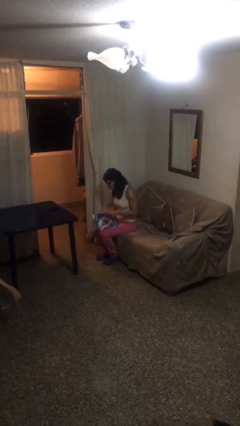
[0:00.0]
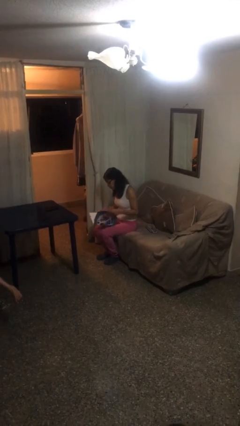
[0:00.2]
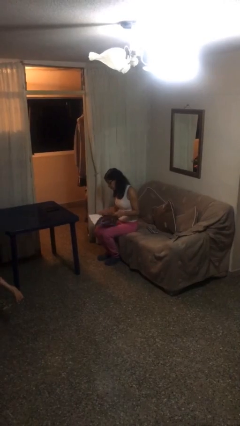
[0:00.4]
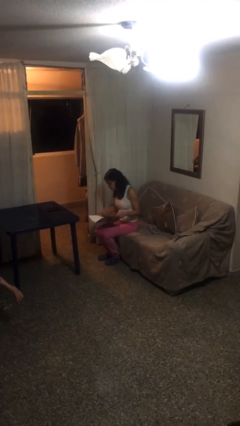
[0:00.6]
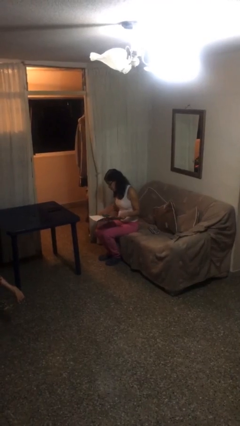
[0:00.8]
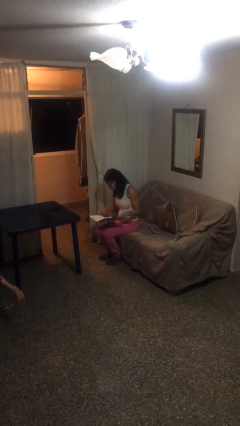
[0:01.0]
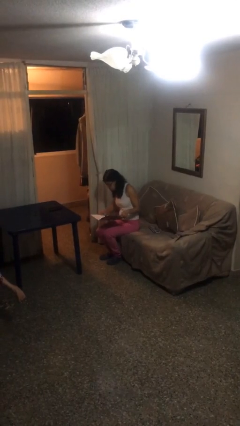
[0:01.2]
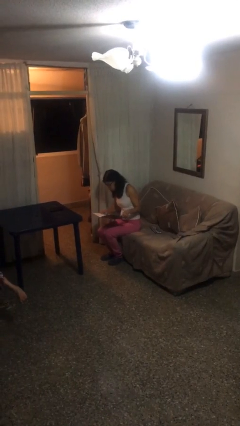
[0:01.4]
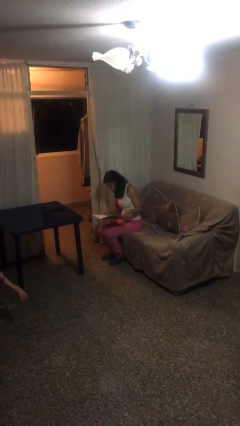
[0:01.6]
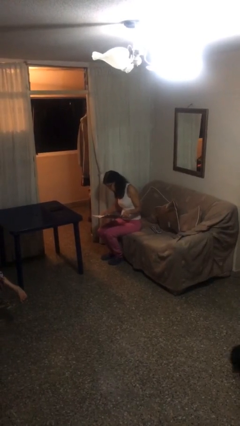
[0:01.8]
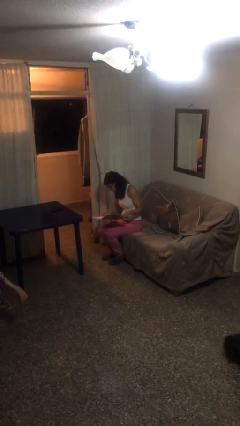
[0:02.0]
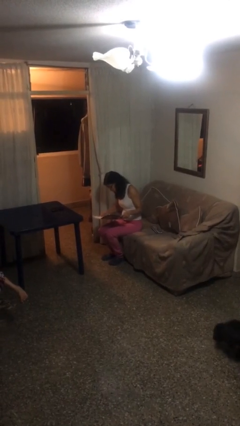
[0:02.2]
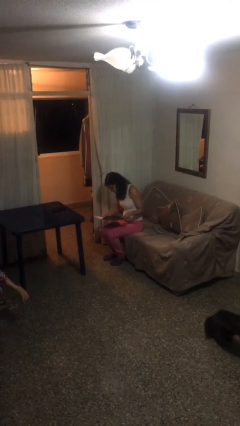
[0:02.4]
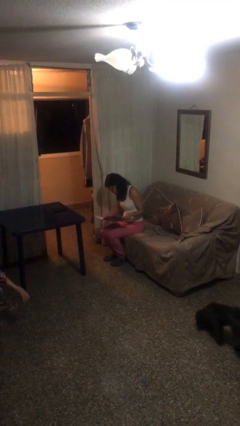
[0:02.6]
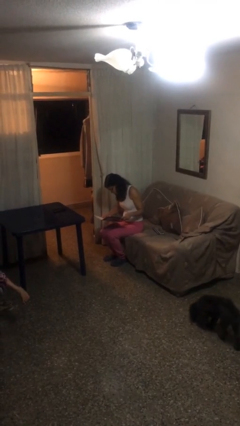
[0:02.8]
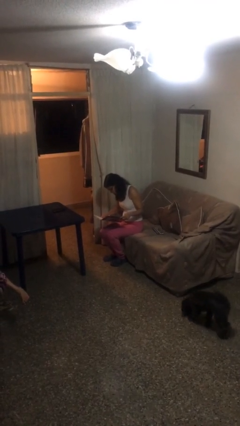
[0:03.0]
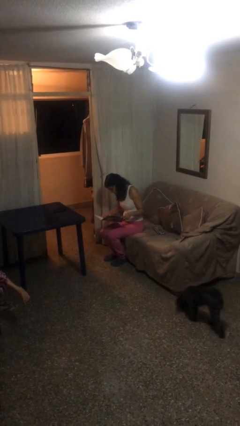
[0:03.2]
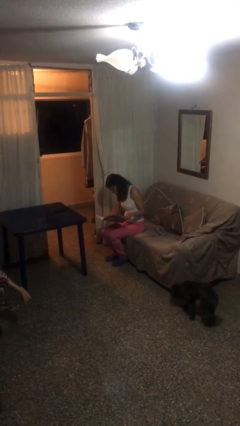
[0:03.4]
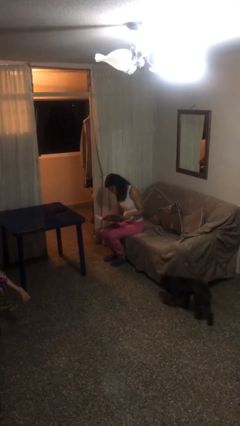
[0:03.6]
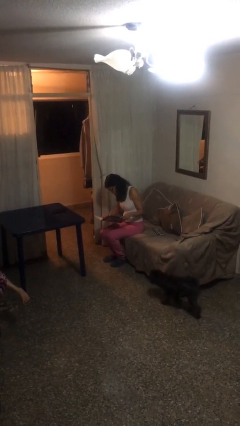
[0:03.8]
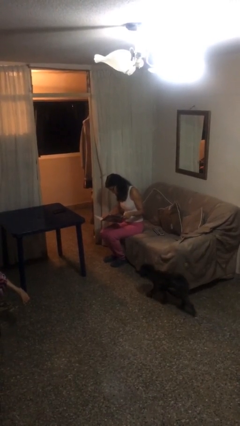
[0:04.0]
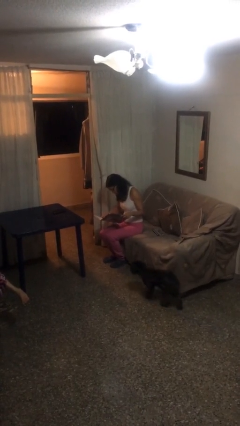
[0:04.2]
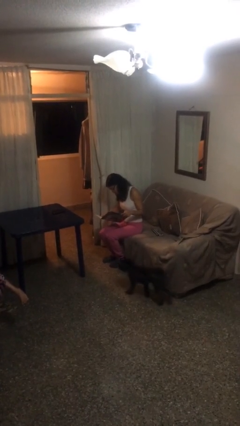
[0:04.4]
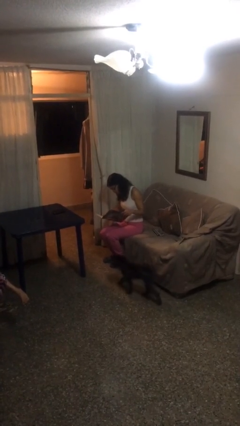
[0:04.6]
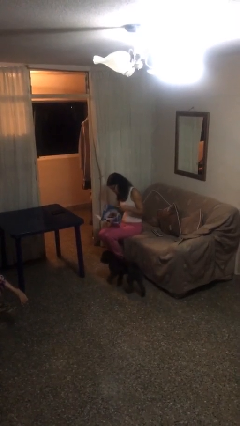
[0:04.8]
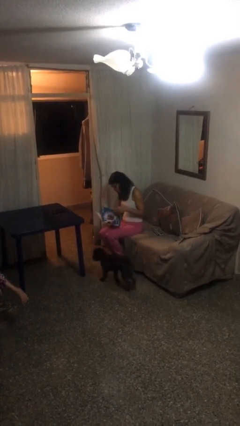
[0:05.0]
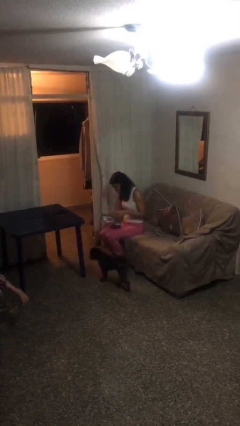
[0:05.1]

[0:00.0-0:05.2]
person reads document

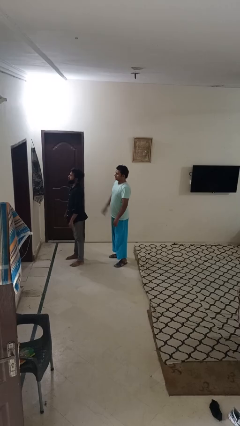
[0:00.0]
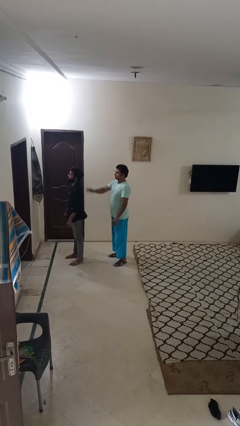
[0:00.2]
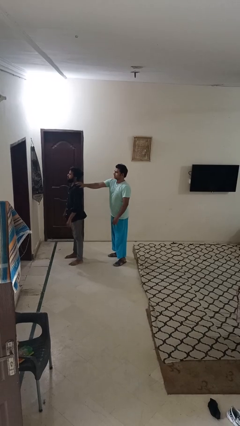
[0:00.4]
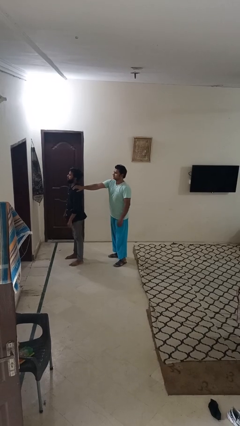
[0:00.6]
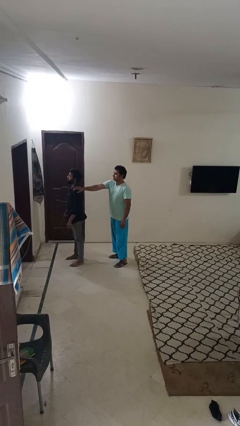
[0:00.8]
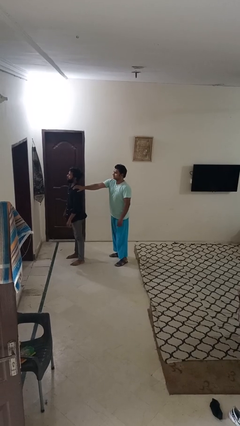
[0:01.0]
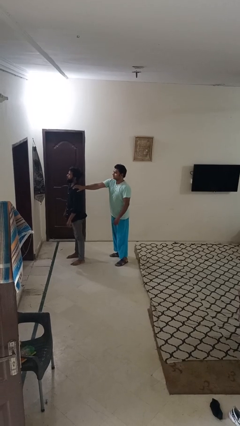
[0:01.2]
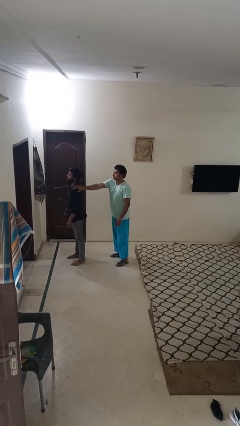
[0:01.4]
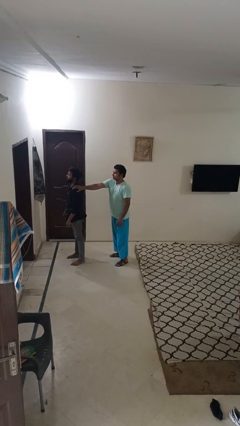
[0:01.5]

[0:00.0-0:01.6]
person grabs person by shoulder

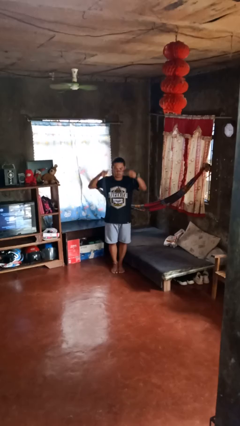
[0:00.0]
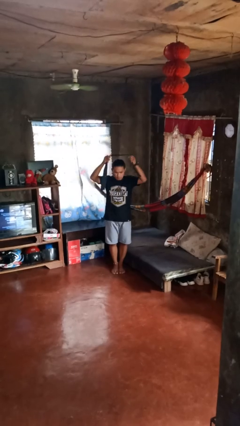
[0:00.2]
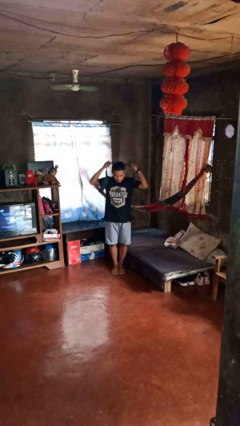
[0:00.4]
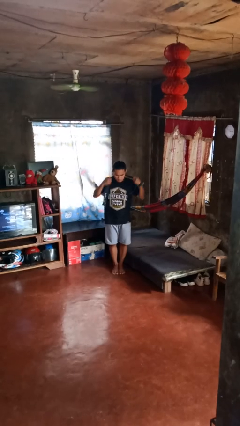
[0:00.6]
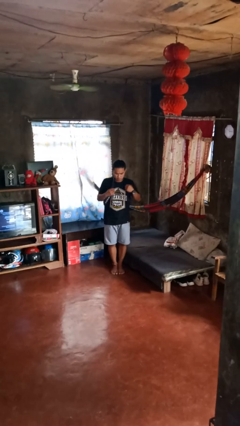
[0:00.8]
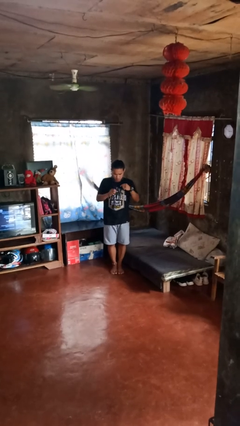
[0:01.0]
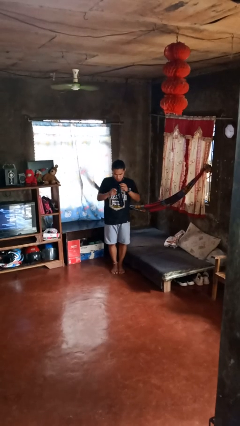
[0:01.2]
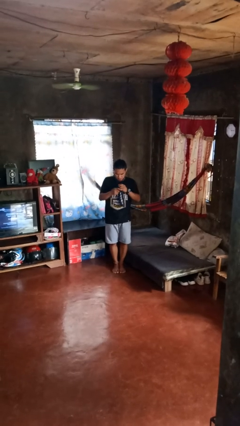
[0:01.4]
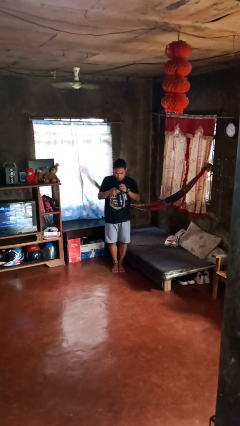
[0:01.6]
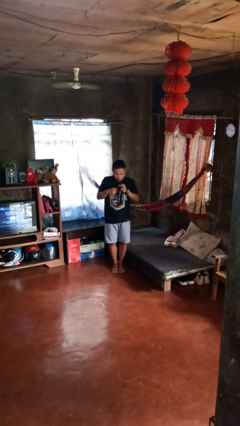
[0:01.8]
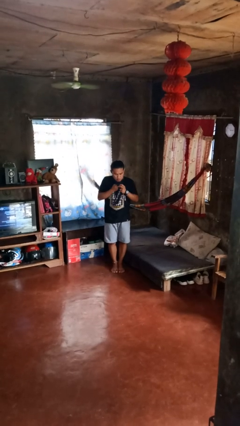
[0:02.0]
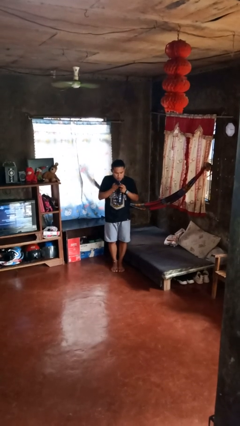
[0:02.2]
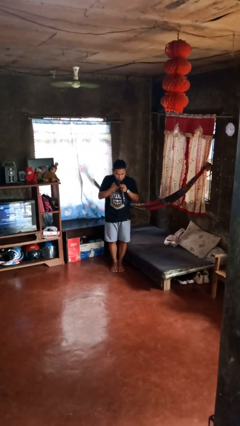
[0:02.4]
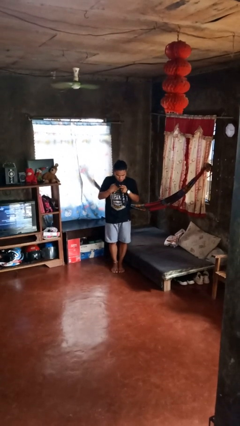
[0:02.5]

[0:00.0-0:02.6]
person dries hair with hairdryer

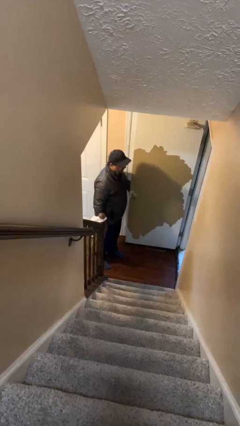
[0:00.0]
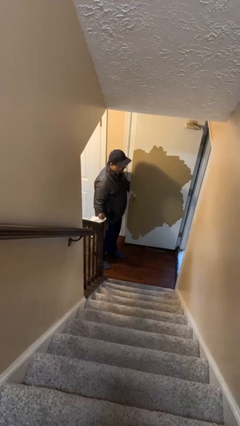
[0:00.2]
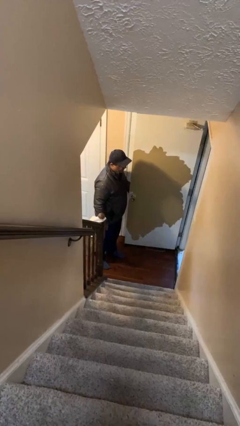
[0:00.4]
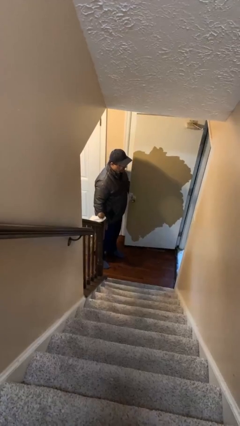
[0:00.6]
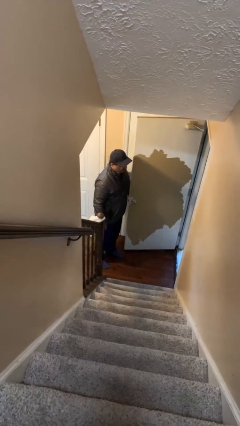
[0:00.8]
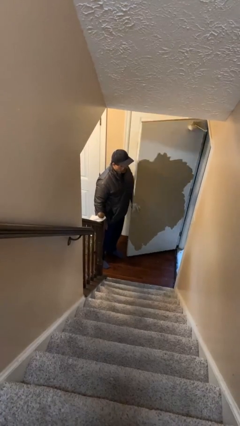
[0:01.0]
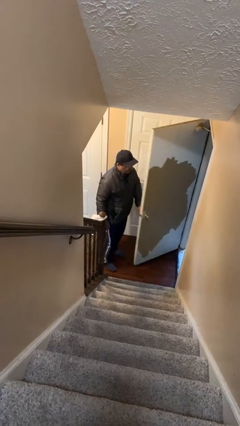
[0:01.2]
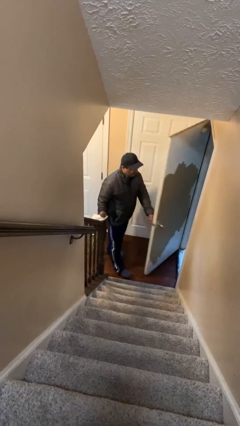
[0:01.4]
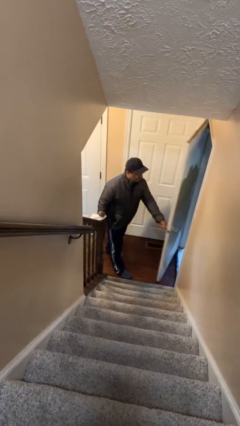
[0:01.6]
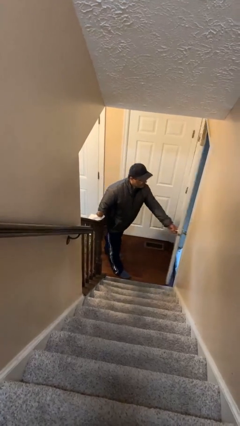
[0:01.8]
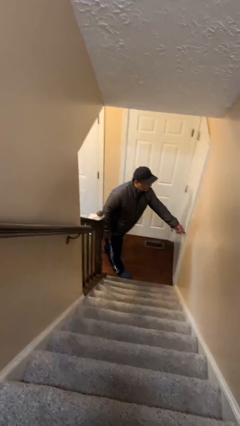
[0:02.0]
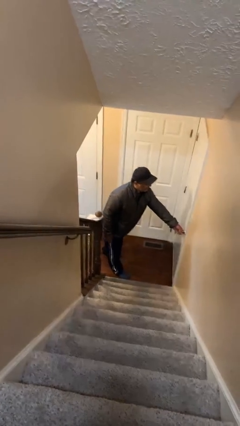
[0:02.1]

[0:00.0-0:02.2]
person closes facility door

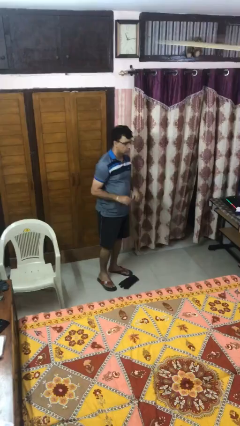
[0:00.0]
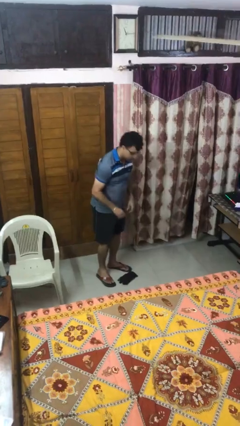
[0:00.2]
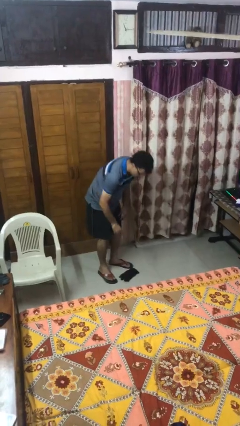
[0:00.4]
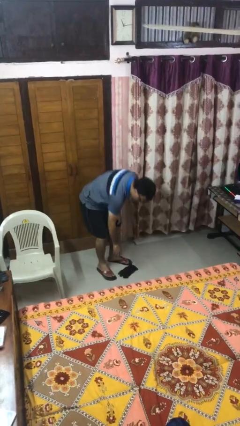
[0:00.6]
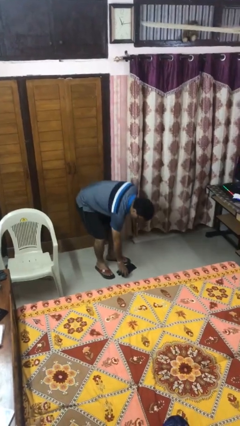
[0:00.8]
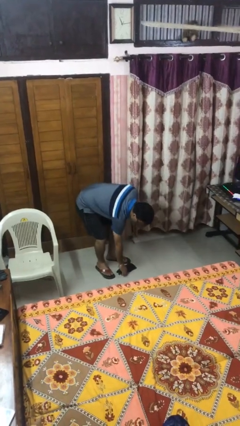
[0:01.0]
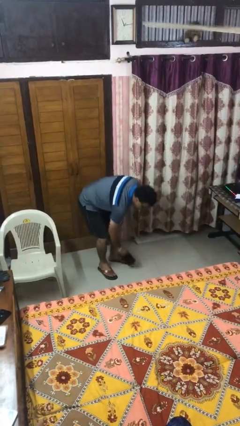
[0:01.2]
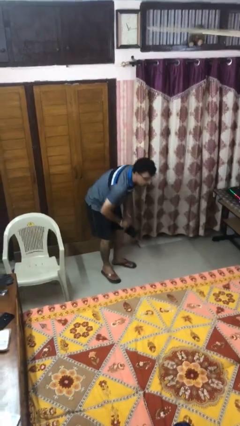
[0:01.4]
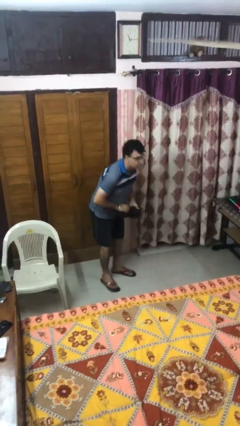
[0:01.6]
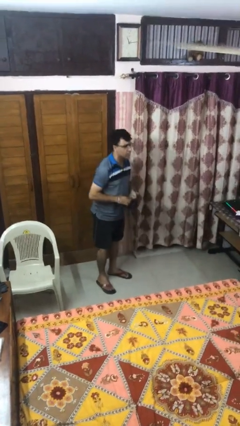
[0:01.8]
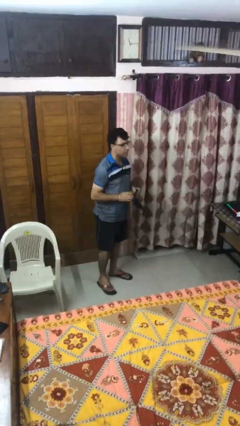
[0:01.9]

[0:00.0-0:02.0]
person picks up object from floor

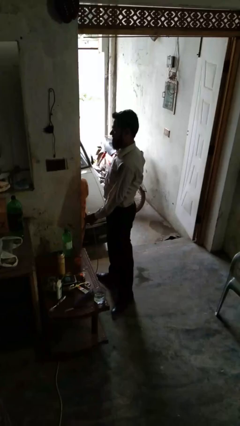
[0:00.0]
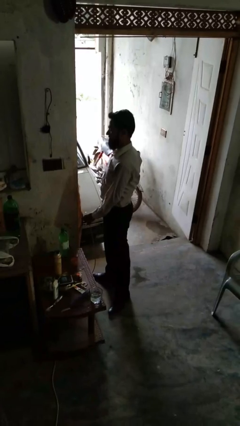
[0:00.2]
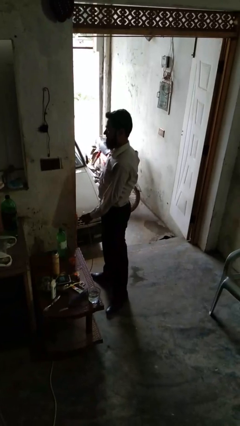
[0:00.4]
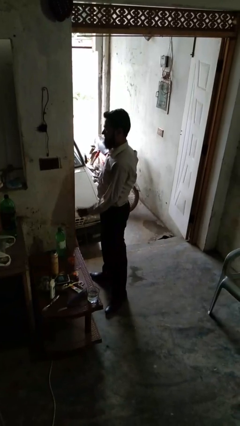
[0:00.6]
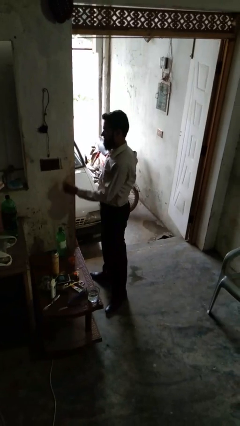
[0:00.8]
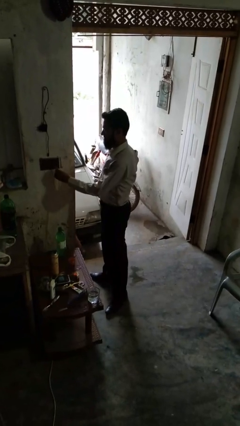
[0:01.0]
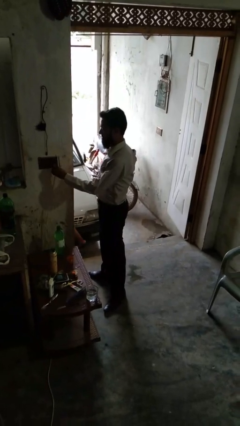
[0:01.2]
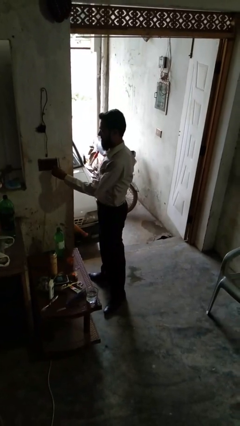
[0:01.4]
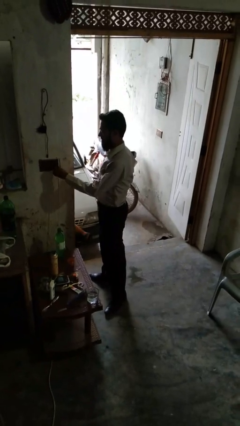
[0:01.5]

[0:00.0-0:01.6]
person plugs into electrical socket

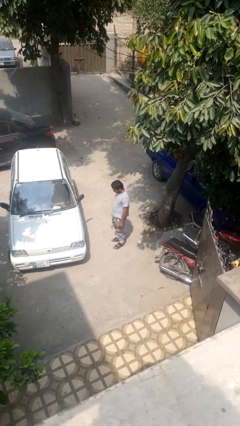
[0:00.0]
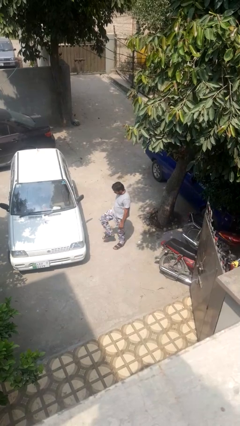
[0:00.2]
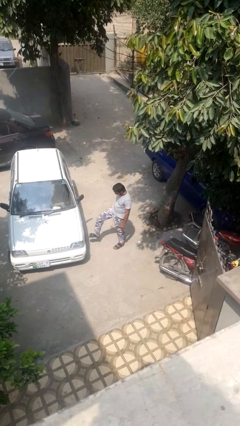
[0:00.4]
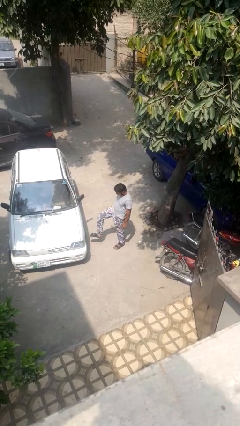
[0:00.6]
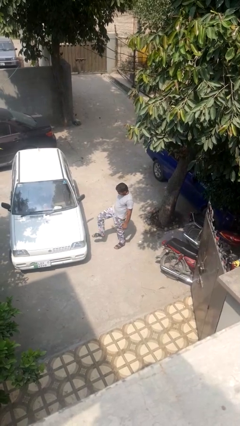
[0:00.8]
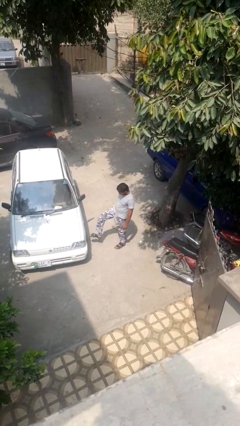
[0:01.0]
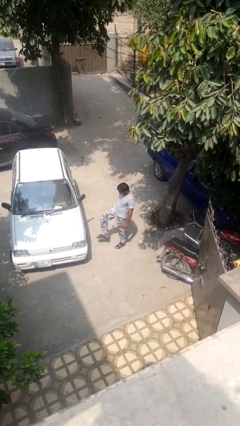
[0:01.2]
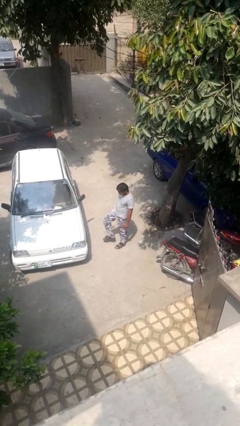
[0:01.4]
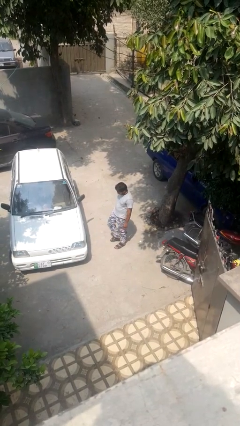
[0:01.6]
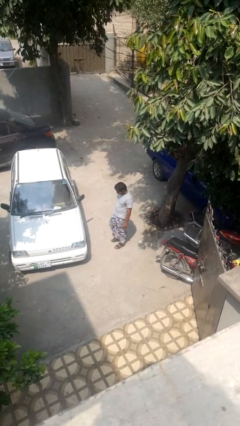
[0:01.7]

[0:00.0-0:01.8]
person kicks car tires
